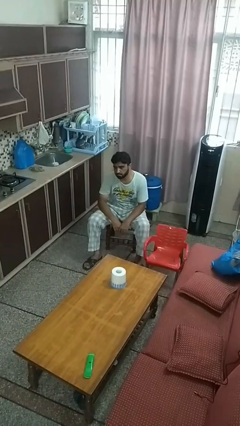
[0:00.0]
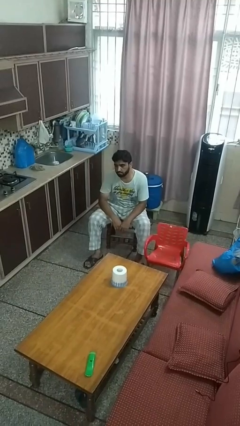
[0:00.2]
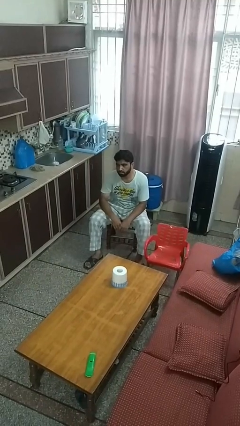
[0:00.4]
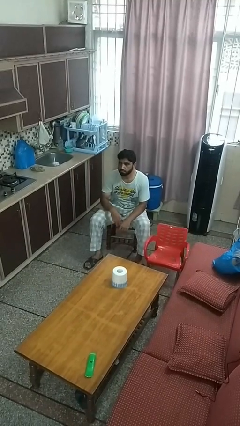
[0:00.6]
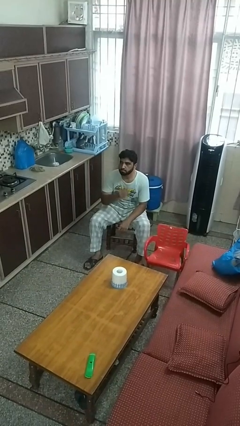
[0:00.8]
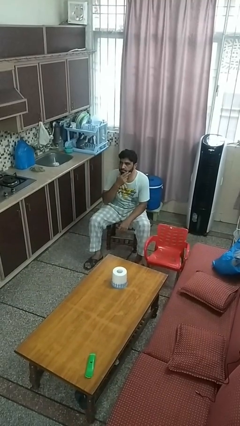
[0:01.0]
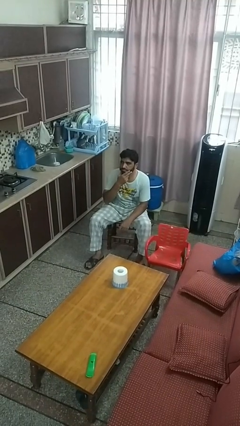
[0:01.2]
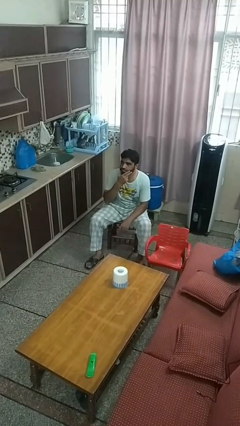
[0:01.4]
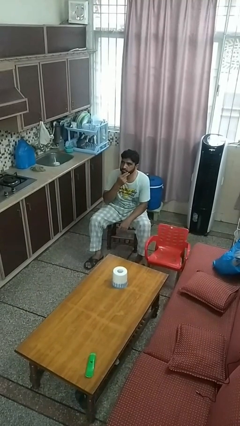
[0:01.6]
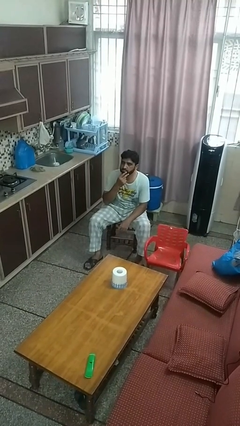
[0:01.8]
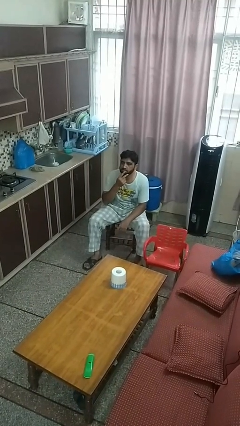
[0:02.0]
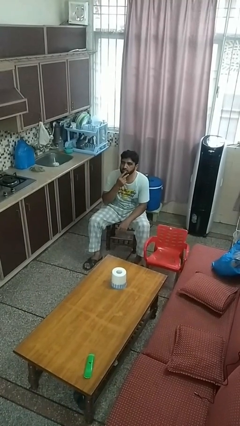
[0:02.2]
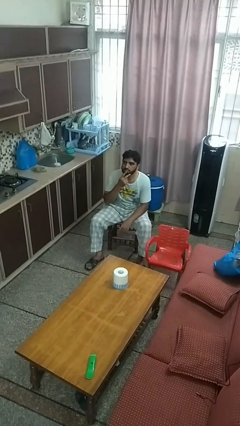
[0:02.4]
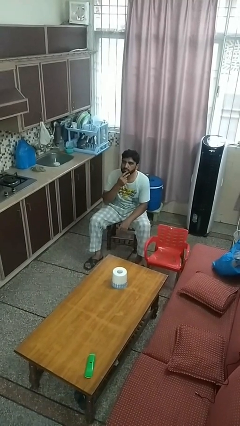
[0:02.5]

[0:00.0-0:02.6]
person strokes chin

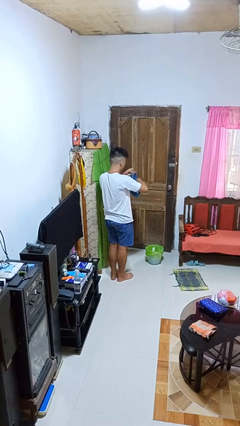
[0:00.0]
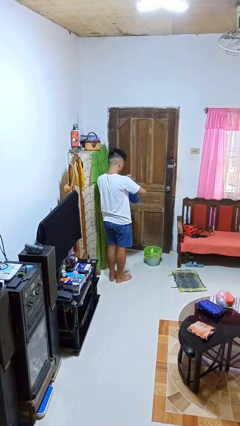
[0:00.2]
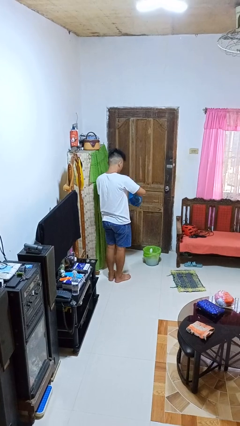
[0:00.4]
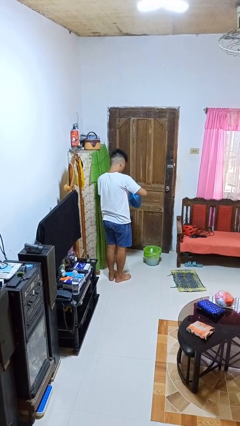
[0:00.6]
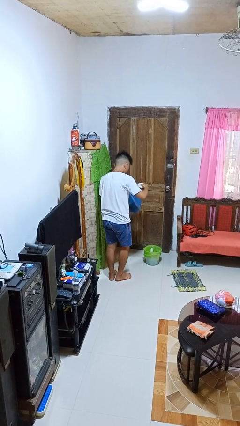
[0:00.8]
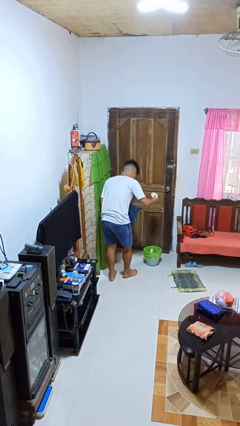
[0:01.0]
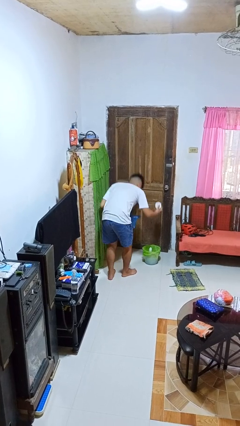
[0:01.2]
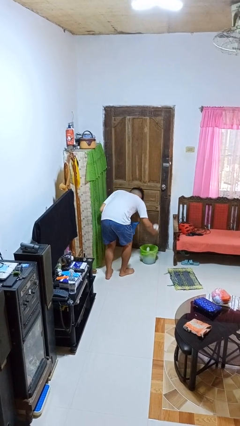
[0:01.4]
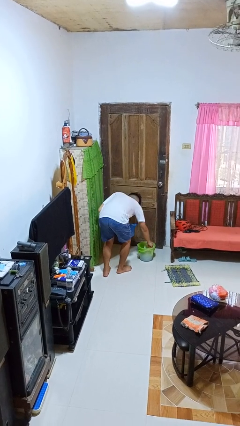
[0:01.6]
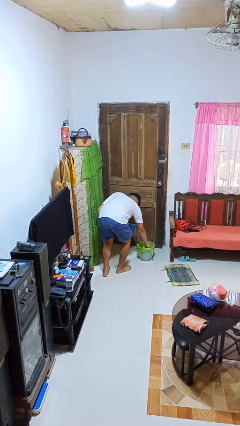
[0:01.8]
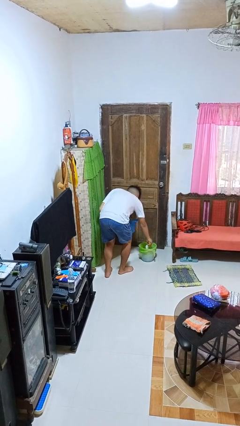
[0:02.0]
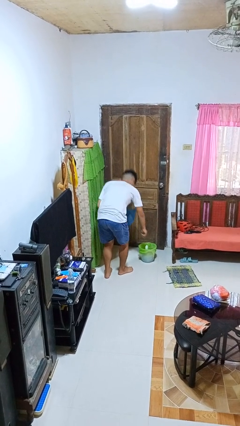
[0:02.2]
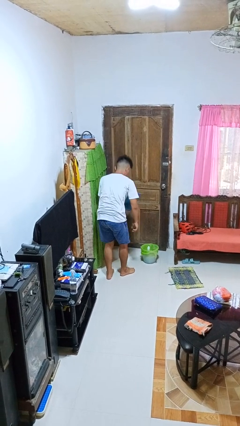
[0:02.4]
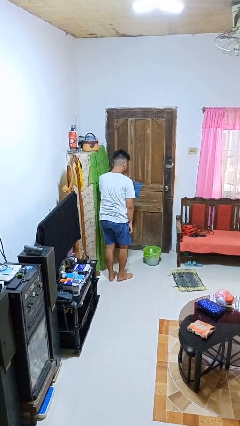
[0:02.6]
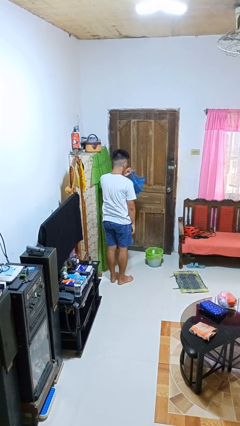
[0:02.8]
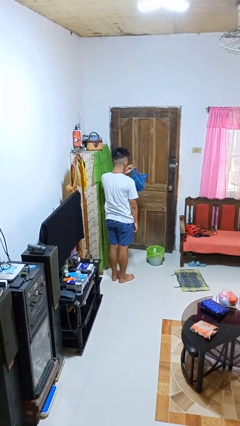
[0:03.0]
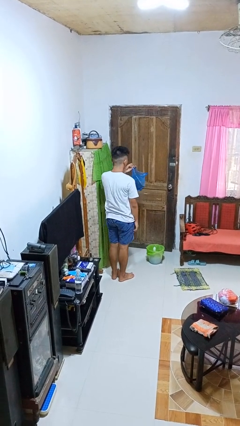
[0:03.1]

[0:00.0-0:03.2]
person discards trash

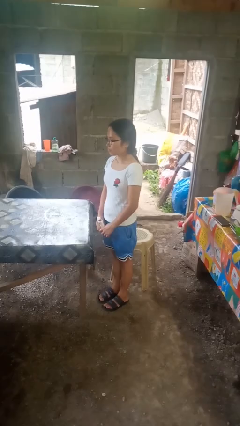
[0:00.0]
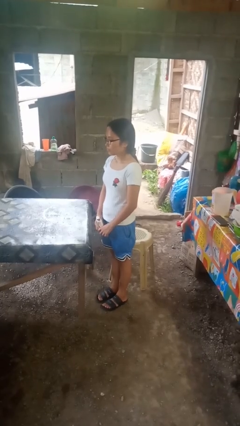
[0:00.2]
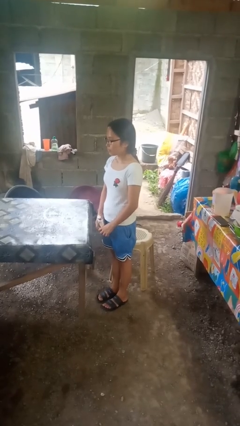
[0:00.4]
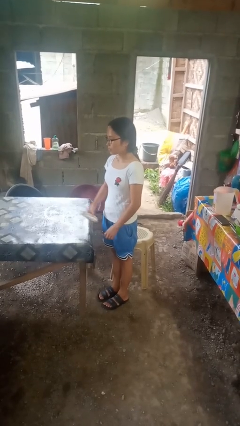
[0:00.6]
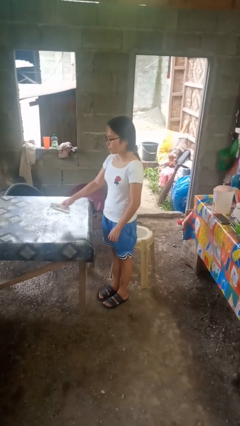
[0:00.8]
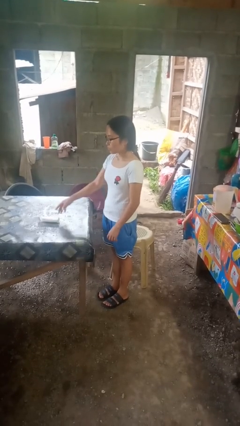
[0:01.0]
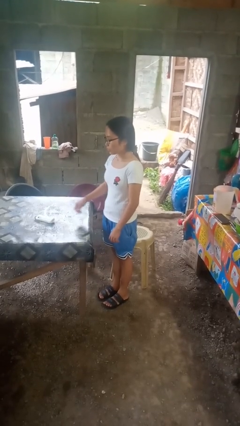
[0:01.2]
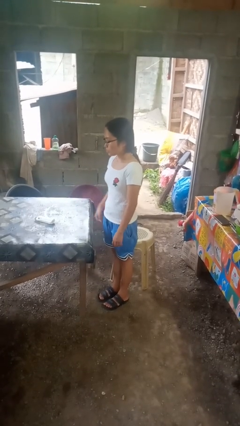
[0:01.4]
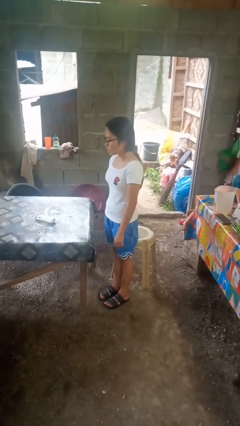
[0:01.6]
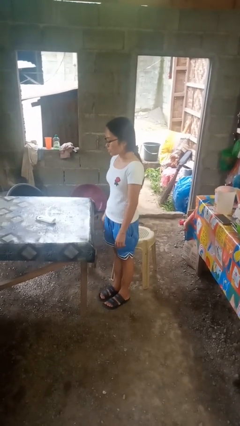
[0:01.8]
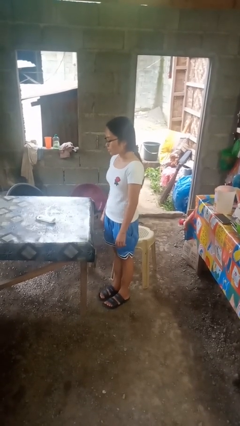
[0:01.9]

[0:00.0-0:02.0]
person throws object on table

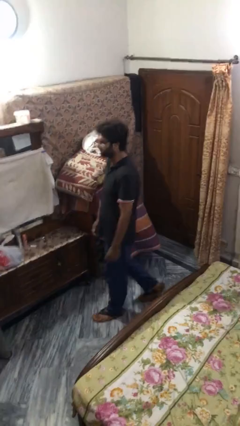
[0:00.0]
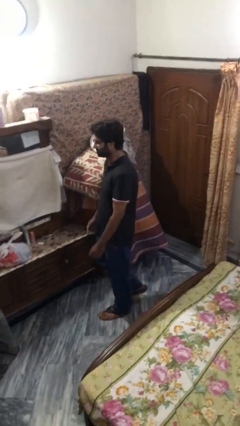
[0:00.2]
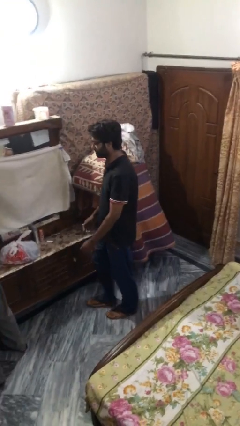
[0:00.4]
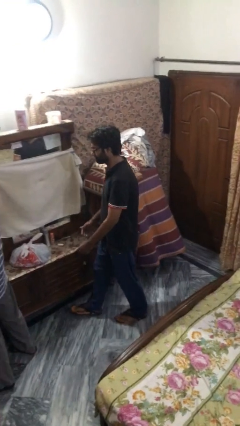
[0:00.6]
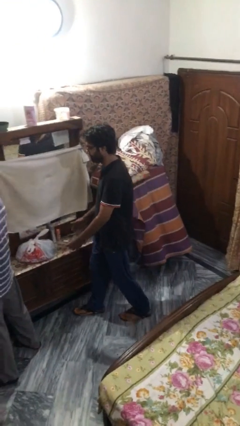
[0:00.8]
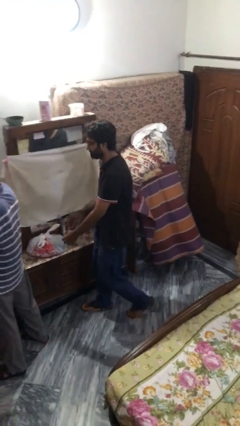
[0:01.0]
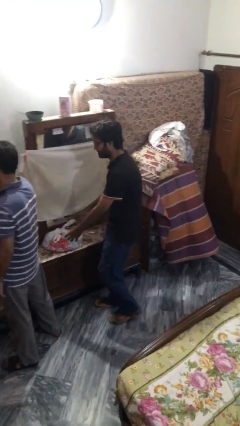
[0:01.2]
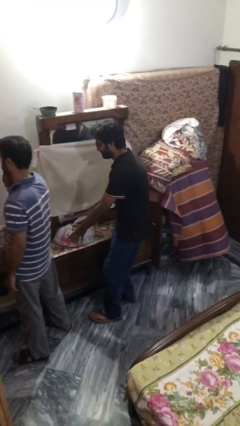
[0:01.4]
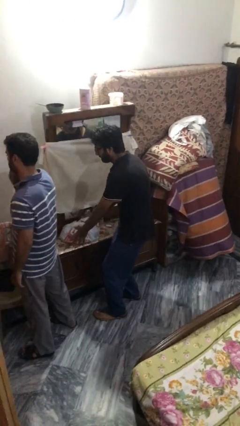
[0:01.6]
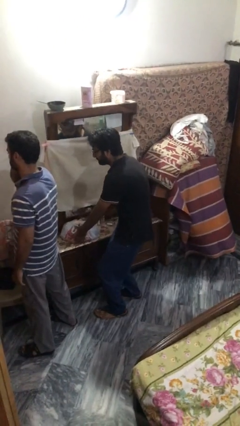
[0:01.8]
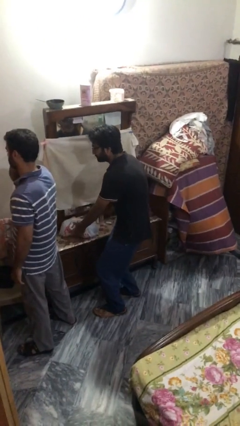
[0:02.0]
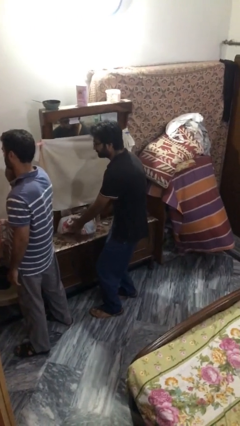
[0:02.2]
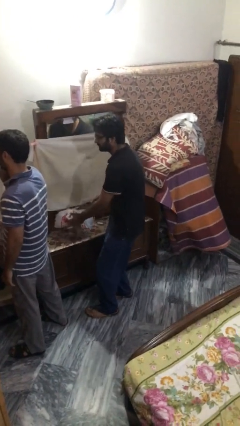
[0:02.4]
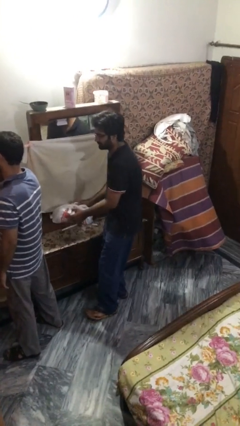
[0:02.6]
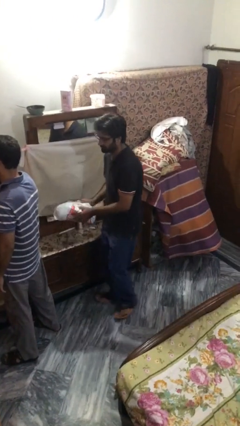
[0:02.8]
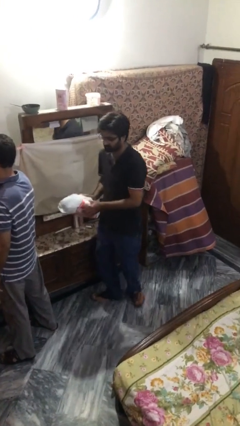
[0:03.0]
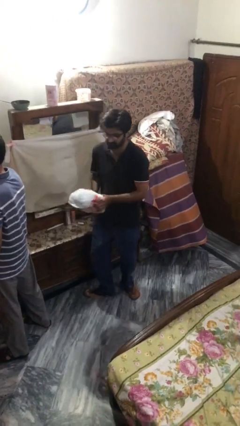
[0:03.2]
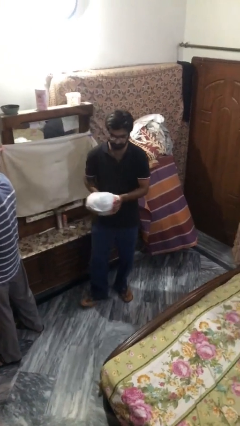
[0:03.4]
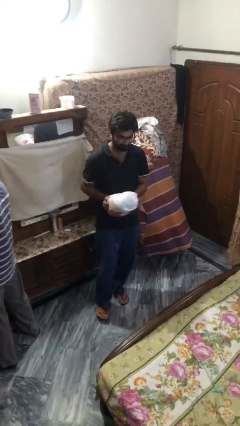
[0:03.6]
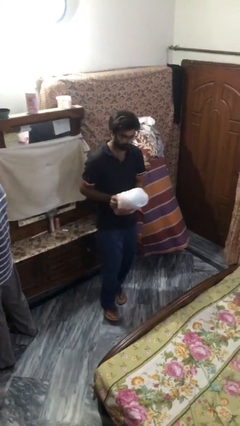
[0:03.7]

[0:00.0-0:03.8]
person steals object from person

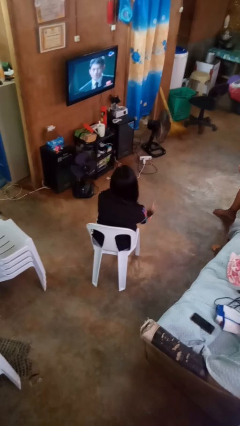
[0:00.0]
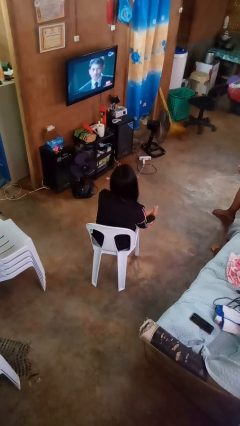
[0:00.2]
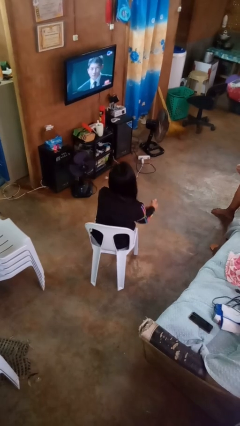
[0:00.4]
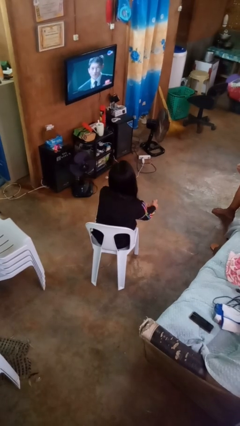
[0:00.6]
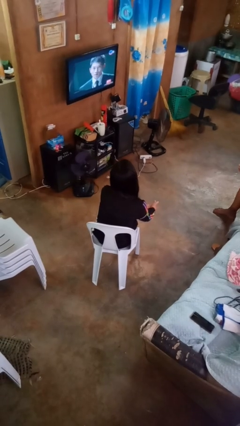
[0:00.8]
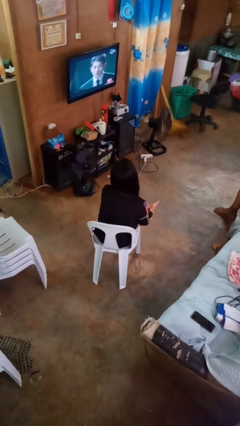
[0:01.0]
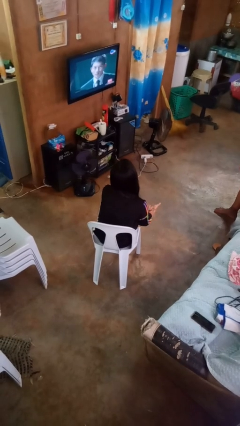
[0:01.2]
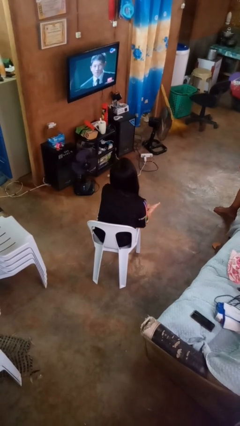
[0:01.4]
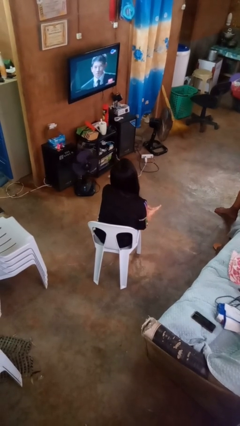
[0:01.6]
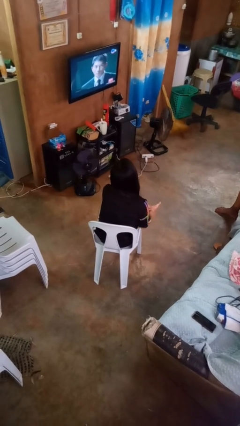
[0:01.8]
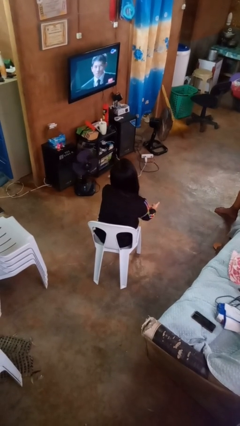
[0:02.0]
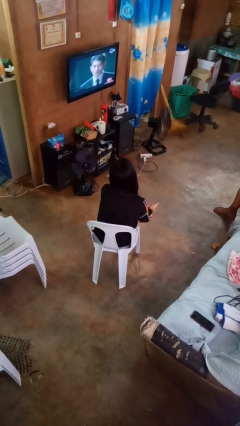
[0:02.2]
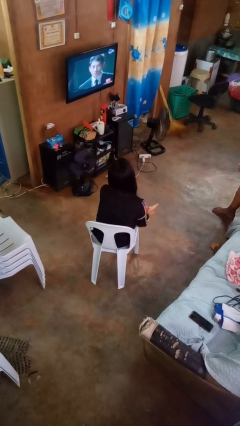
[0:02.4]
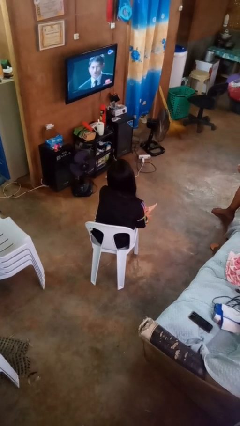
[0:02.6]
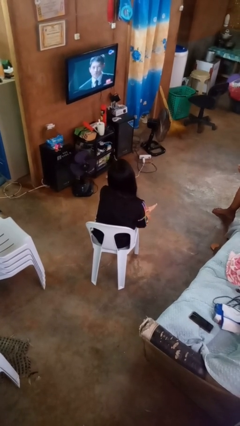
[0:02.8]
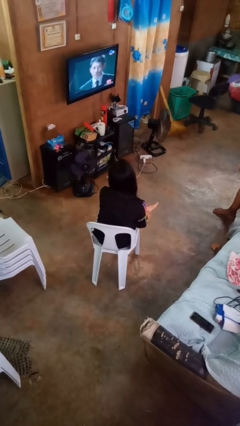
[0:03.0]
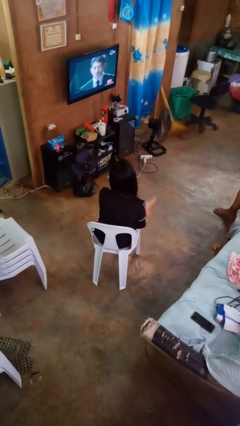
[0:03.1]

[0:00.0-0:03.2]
person rubs foot

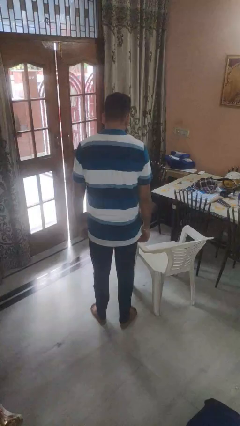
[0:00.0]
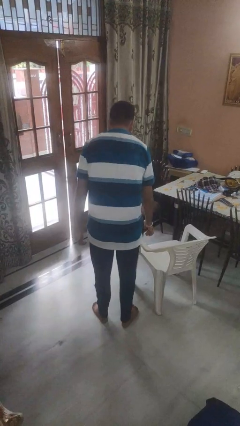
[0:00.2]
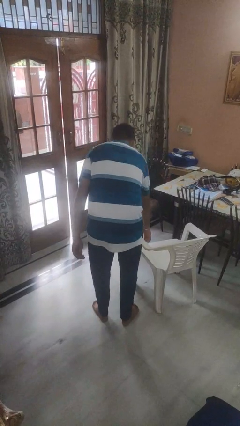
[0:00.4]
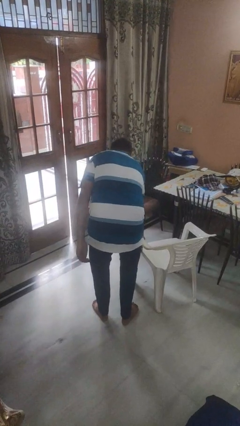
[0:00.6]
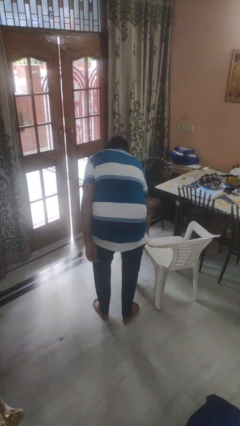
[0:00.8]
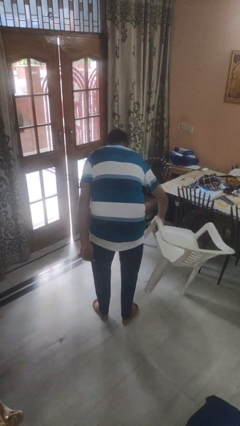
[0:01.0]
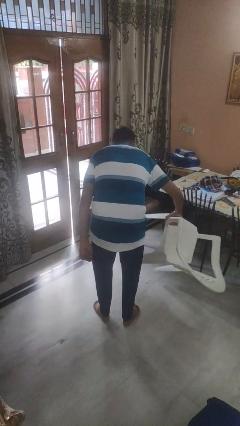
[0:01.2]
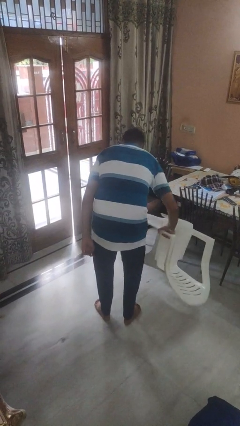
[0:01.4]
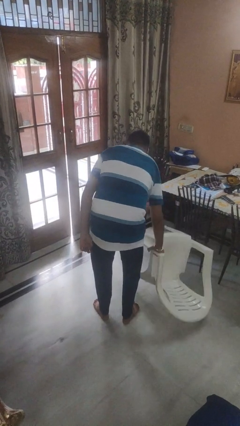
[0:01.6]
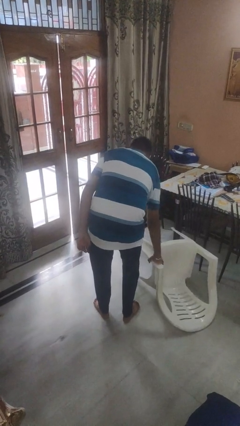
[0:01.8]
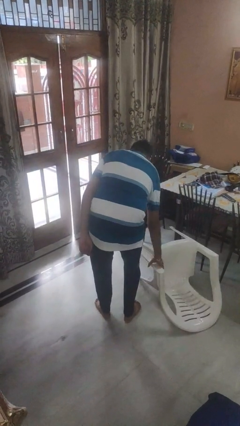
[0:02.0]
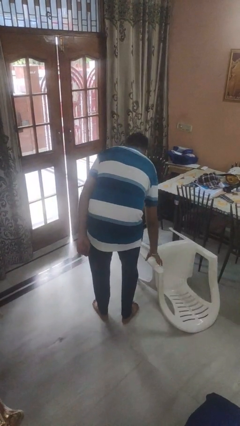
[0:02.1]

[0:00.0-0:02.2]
person knocks over furniture
